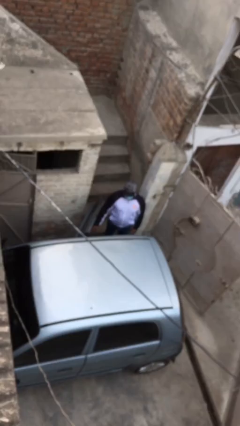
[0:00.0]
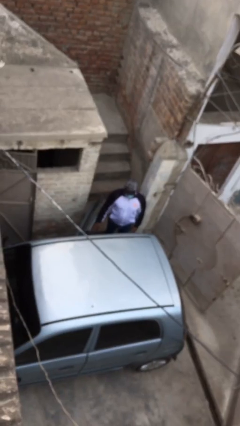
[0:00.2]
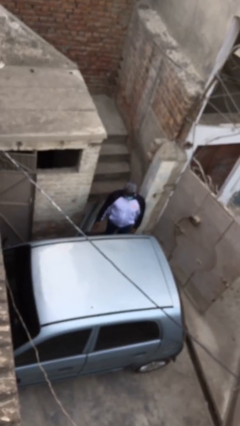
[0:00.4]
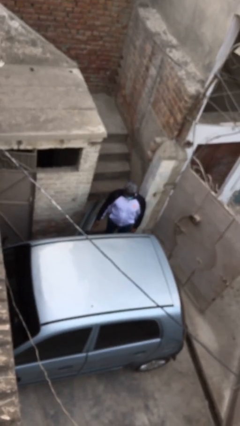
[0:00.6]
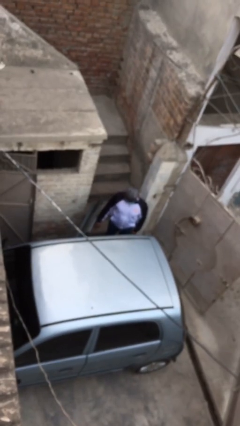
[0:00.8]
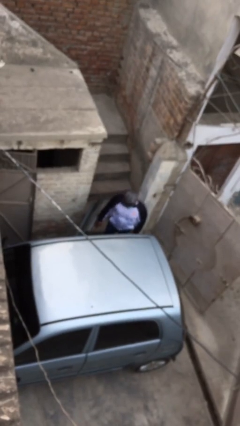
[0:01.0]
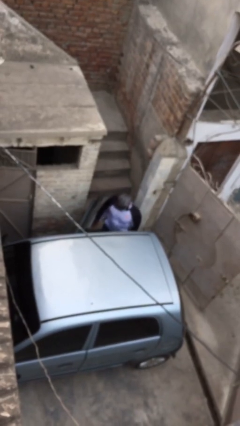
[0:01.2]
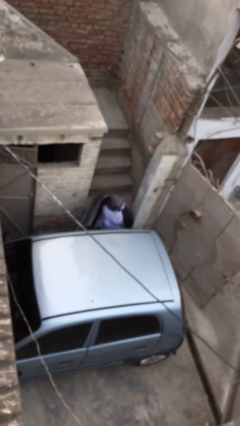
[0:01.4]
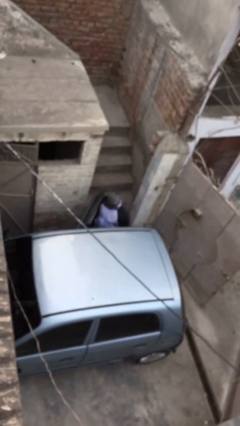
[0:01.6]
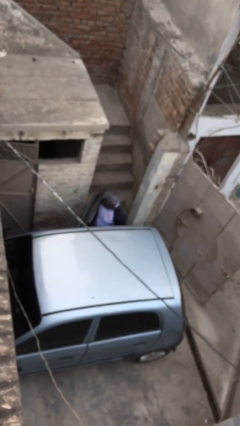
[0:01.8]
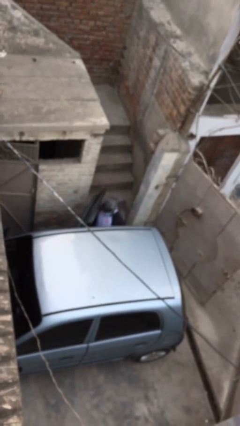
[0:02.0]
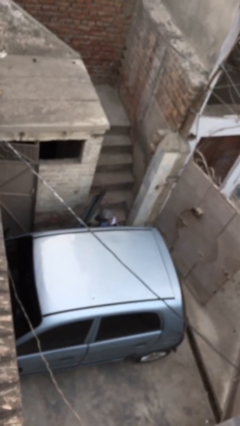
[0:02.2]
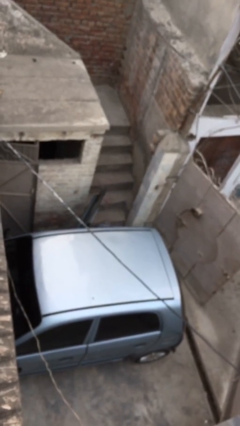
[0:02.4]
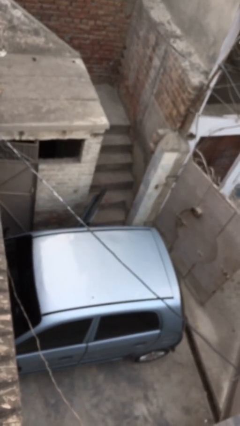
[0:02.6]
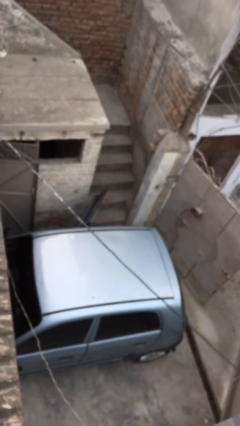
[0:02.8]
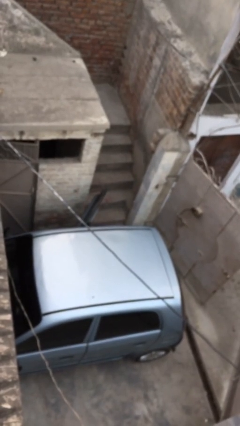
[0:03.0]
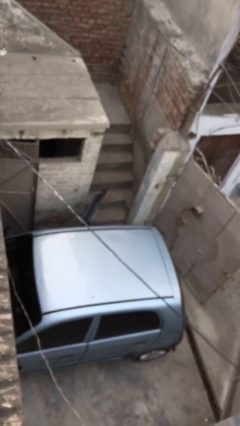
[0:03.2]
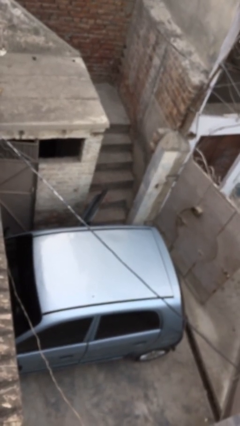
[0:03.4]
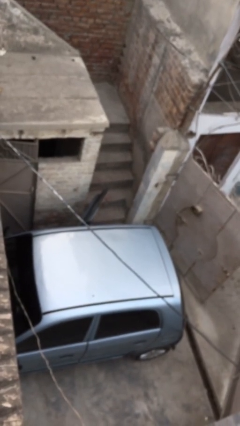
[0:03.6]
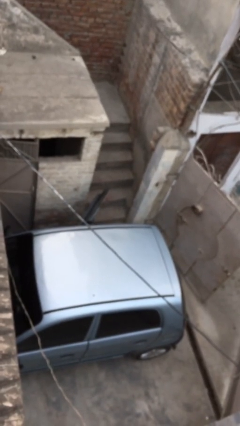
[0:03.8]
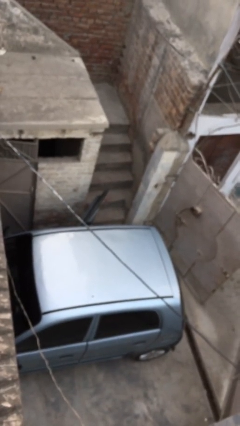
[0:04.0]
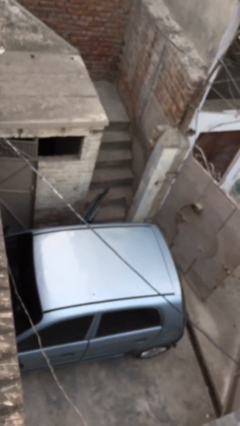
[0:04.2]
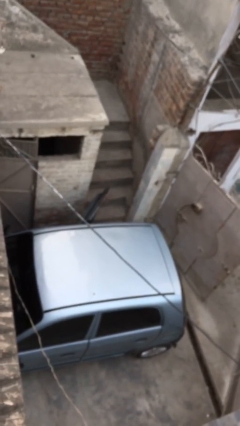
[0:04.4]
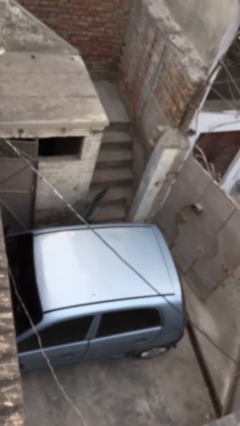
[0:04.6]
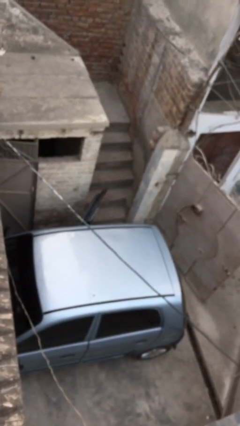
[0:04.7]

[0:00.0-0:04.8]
person enters car

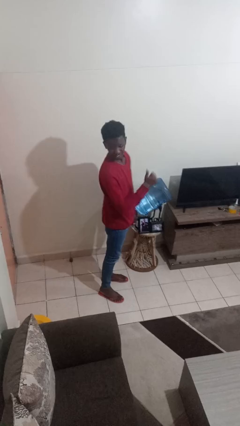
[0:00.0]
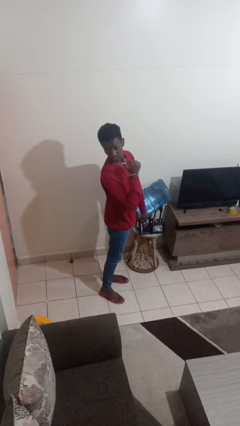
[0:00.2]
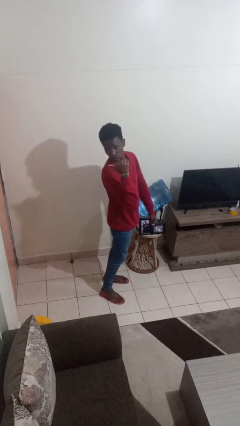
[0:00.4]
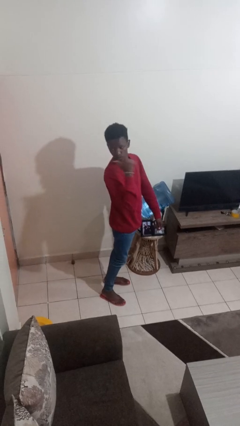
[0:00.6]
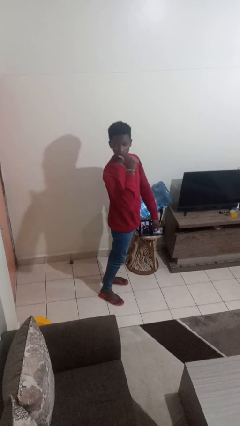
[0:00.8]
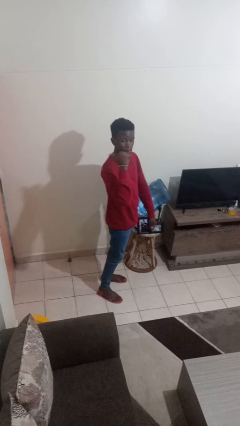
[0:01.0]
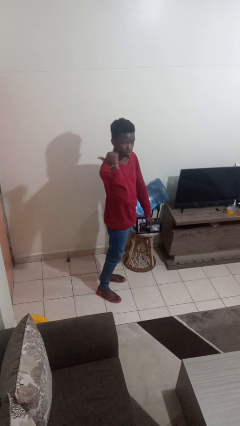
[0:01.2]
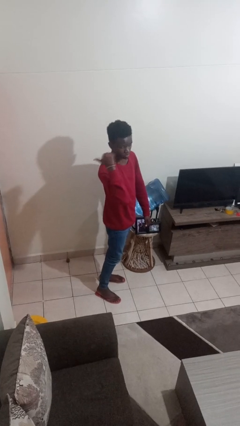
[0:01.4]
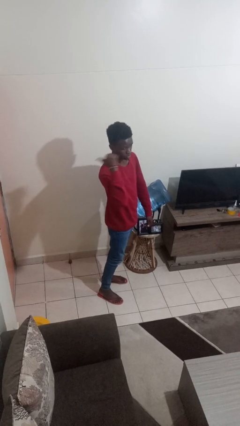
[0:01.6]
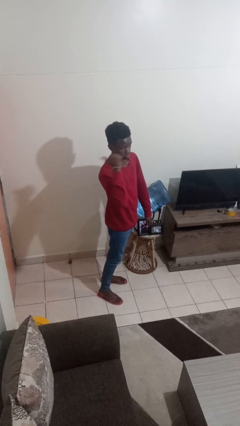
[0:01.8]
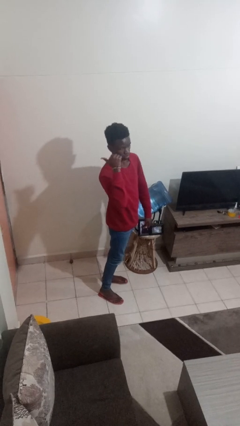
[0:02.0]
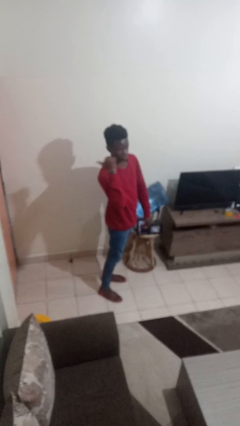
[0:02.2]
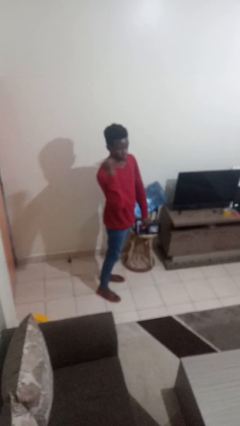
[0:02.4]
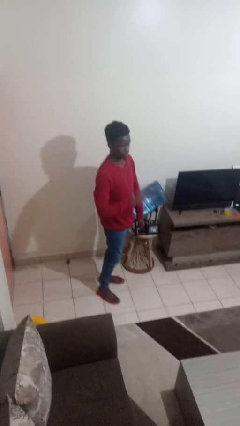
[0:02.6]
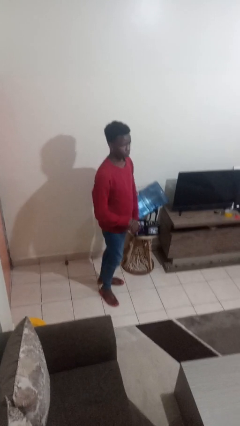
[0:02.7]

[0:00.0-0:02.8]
person gestures behind me

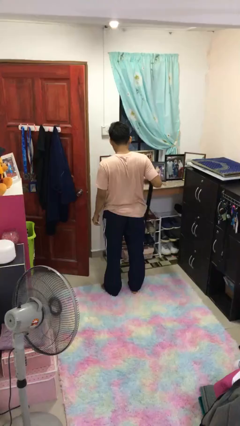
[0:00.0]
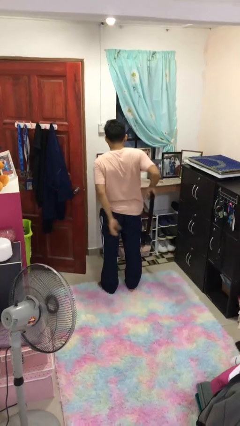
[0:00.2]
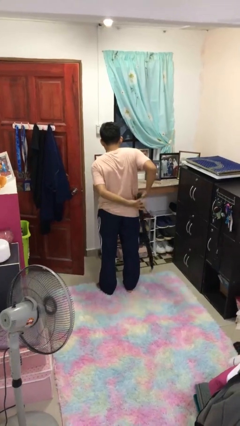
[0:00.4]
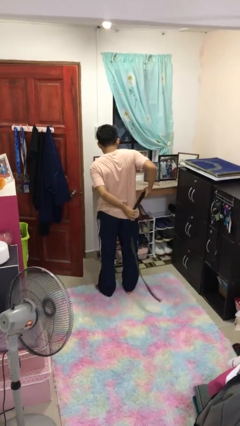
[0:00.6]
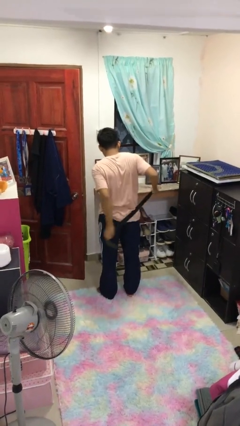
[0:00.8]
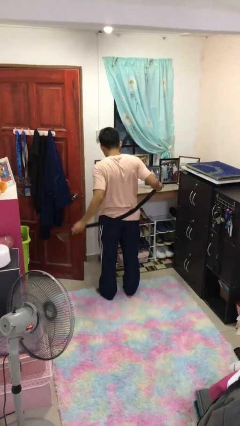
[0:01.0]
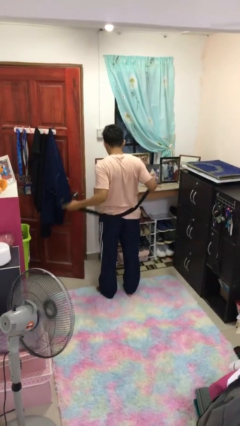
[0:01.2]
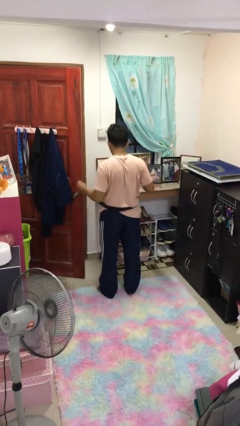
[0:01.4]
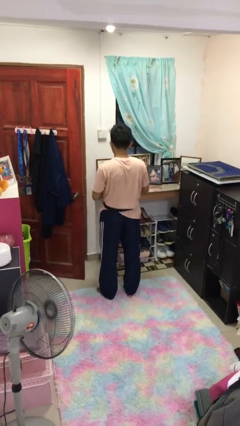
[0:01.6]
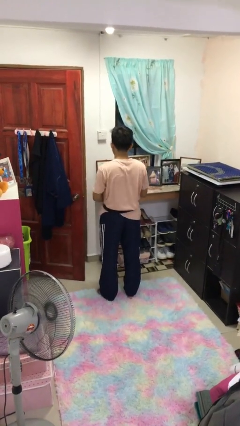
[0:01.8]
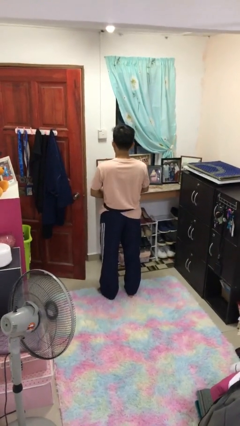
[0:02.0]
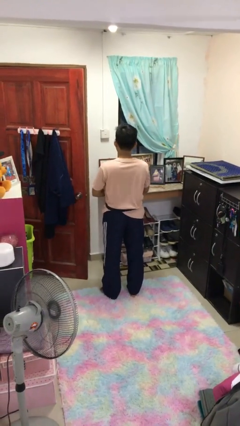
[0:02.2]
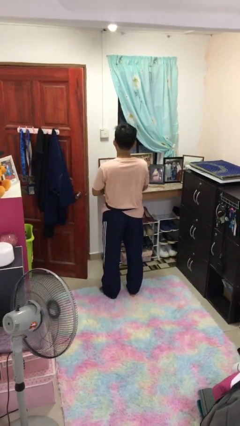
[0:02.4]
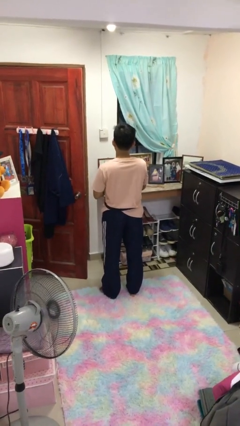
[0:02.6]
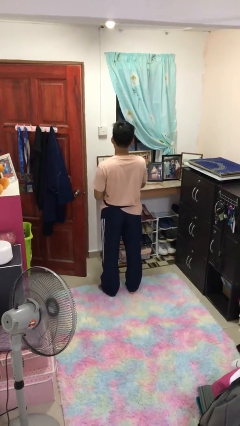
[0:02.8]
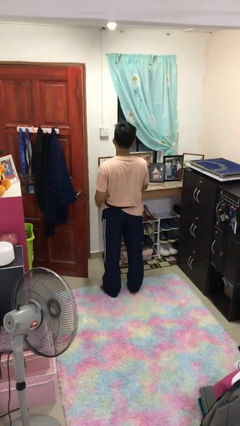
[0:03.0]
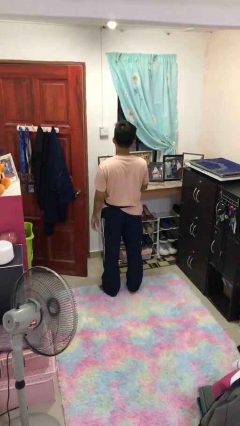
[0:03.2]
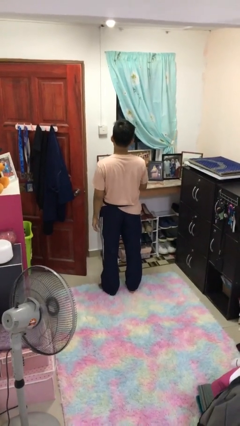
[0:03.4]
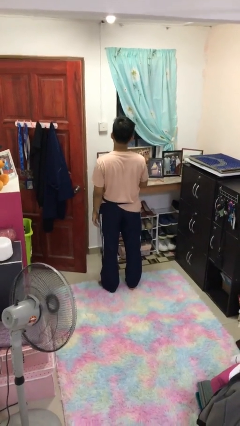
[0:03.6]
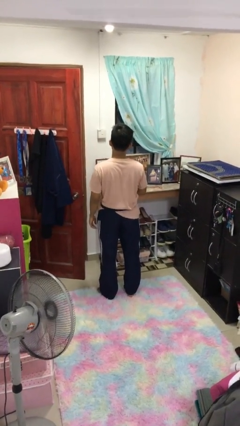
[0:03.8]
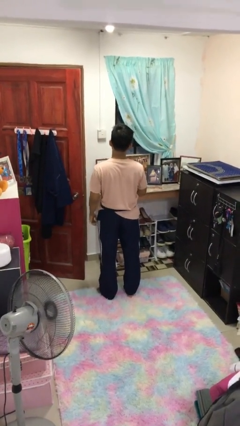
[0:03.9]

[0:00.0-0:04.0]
person puts on belt

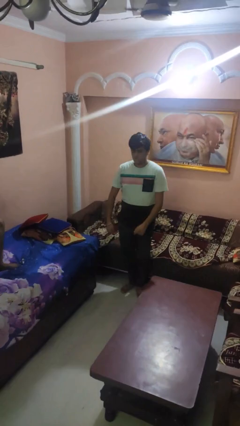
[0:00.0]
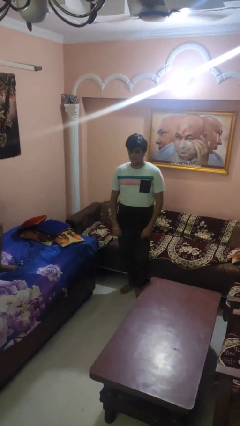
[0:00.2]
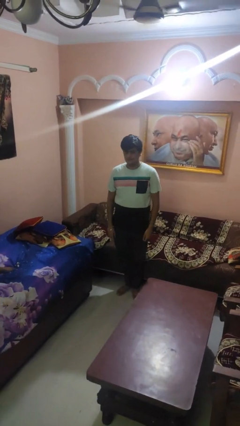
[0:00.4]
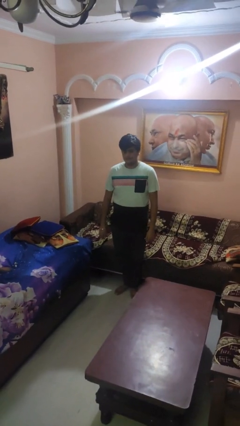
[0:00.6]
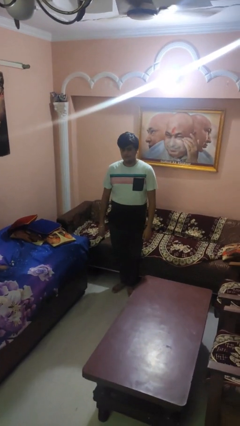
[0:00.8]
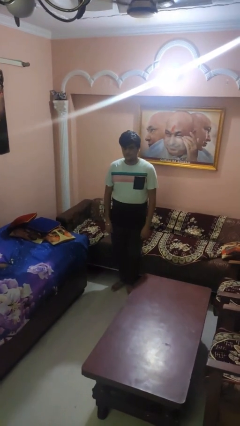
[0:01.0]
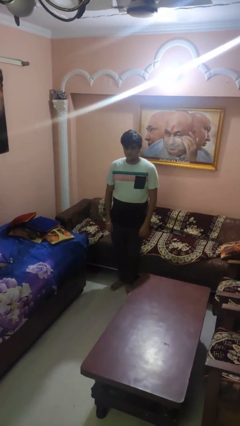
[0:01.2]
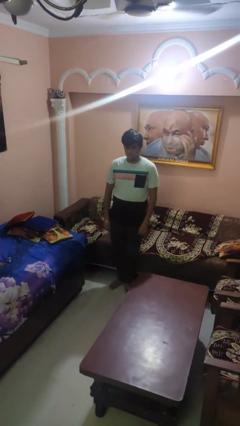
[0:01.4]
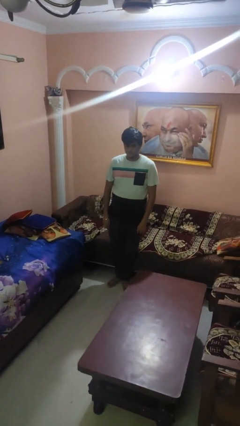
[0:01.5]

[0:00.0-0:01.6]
person stands up

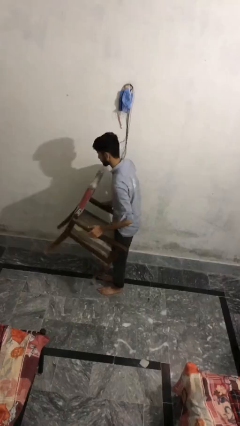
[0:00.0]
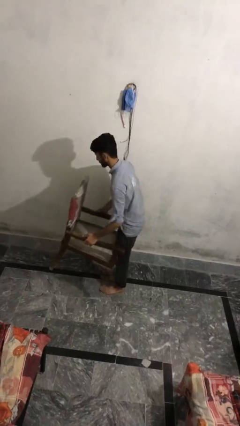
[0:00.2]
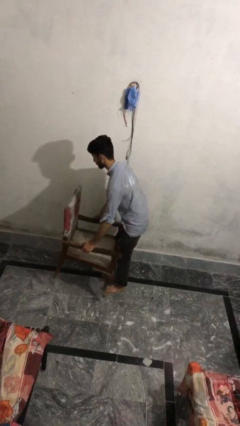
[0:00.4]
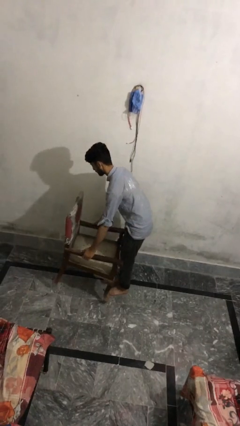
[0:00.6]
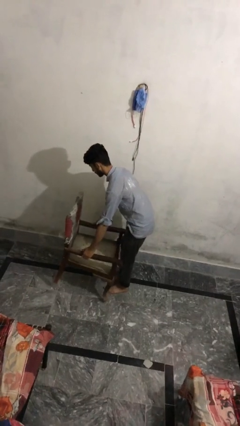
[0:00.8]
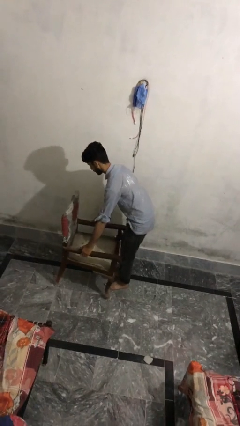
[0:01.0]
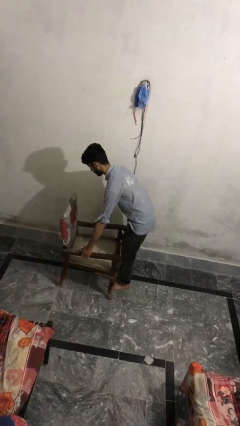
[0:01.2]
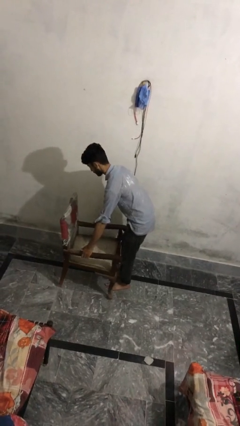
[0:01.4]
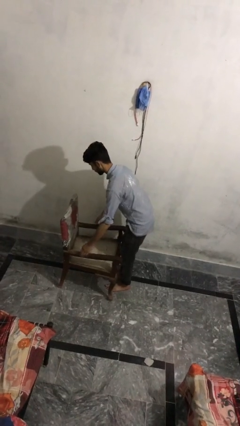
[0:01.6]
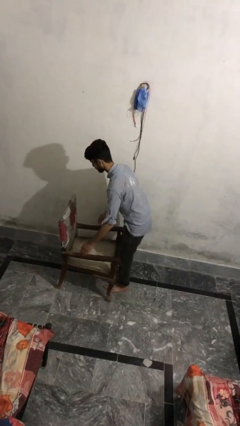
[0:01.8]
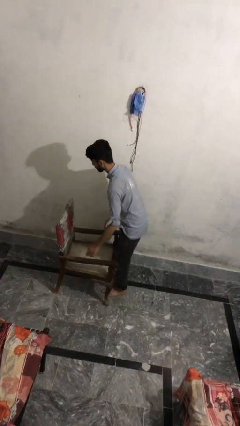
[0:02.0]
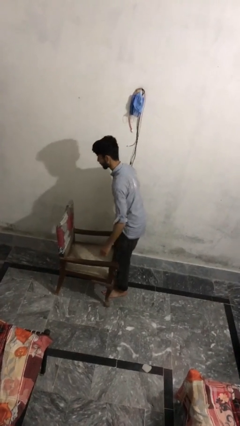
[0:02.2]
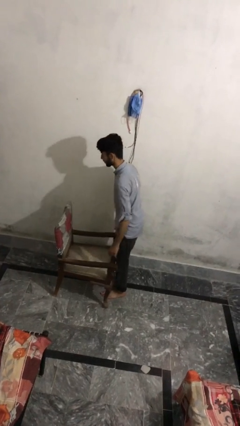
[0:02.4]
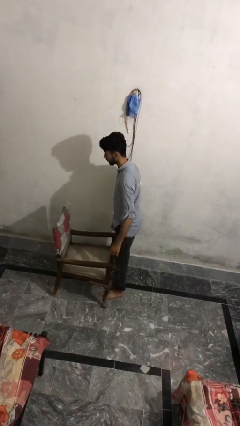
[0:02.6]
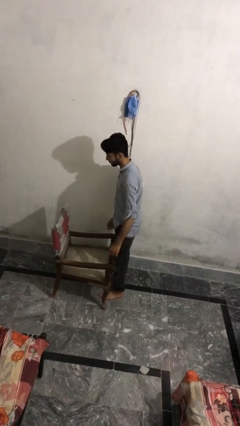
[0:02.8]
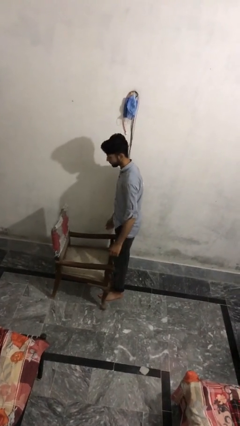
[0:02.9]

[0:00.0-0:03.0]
person puts down object on floor

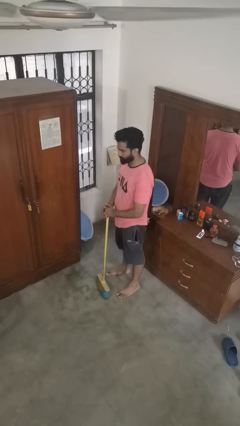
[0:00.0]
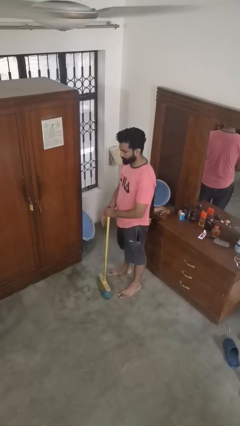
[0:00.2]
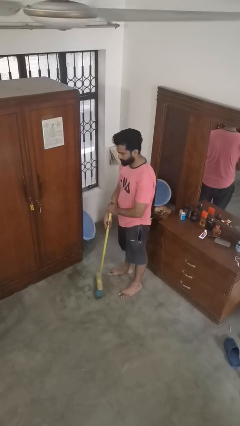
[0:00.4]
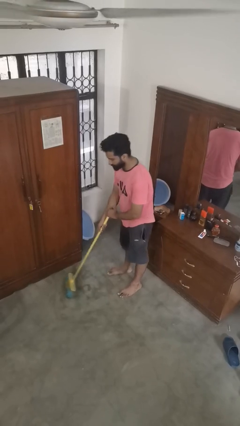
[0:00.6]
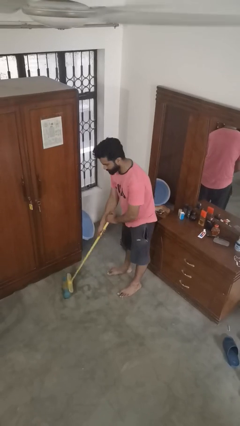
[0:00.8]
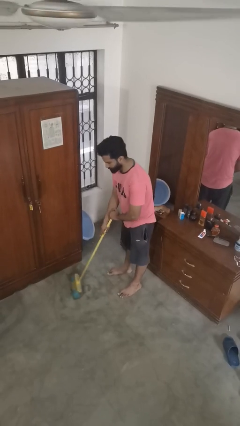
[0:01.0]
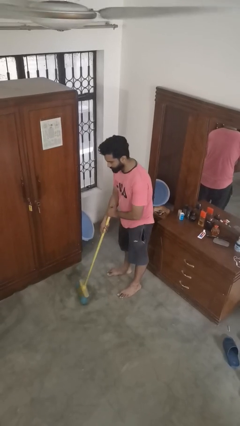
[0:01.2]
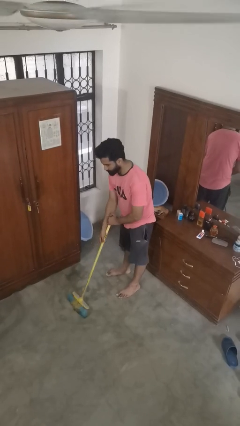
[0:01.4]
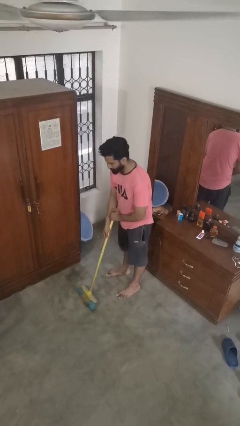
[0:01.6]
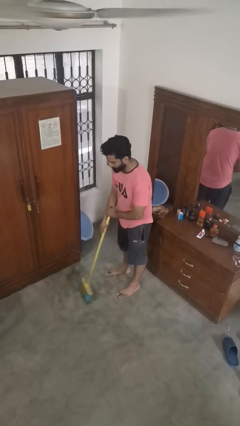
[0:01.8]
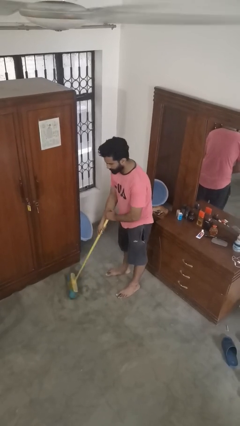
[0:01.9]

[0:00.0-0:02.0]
person sweeps floor
